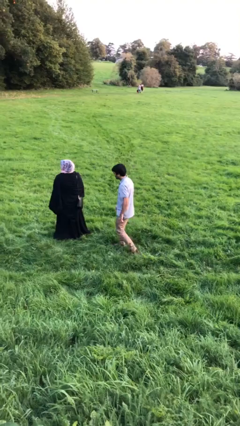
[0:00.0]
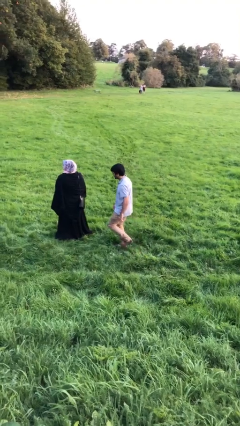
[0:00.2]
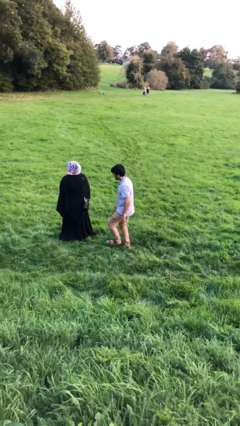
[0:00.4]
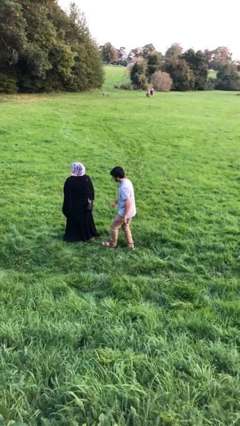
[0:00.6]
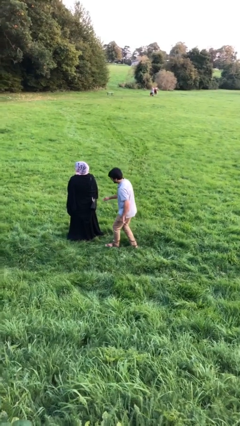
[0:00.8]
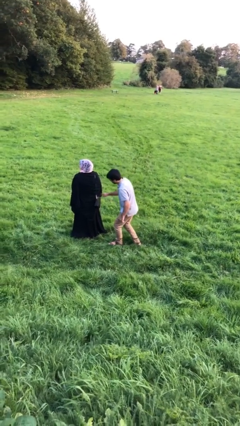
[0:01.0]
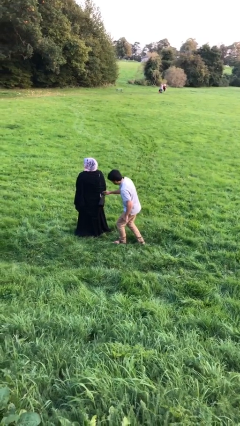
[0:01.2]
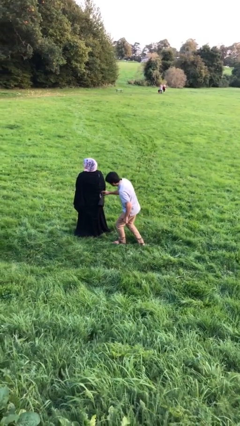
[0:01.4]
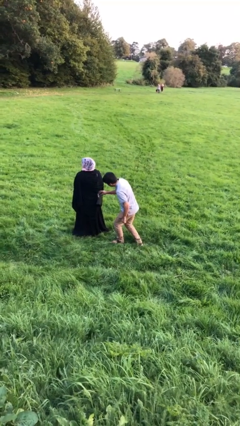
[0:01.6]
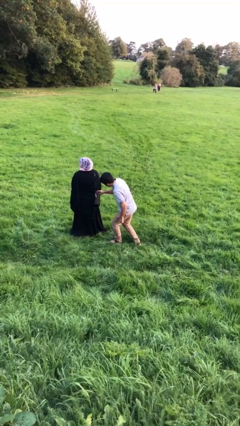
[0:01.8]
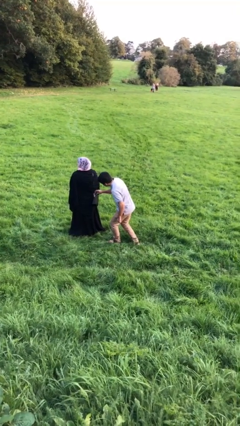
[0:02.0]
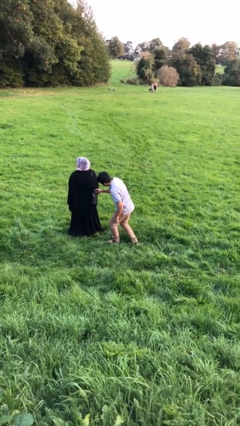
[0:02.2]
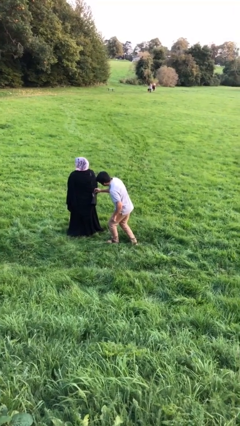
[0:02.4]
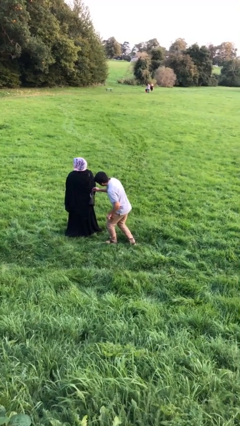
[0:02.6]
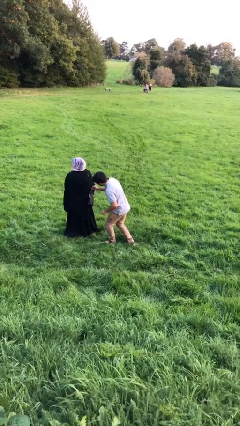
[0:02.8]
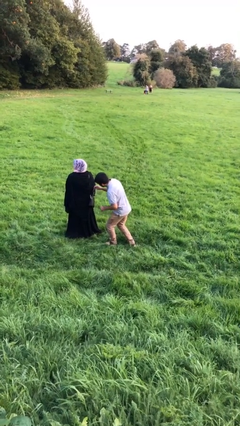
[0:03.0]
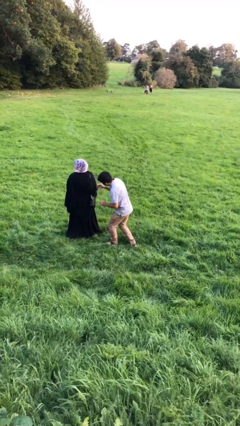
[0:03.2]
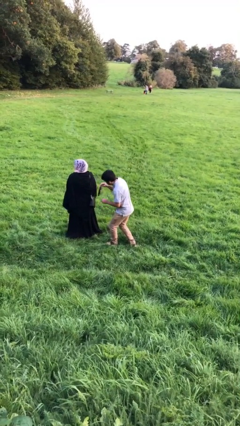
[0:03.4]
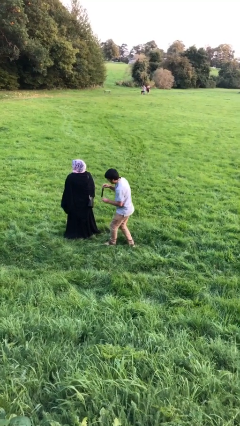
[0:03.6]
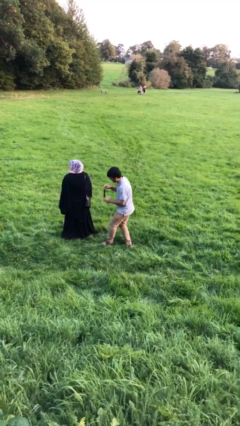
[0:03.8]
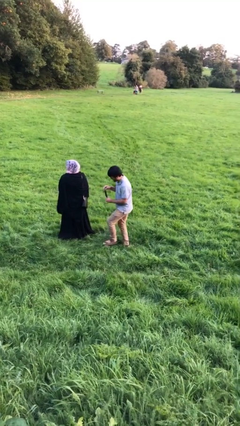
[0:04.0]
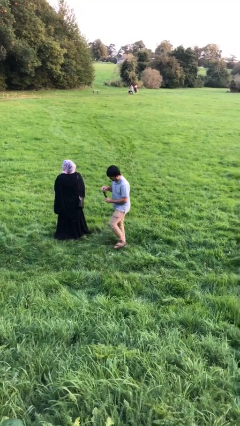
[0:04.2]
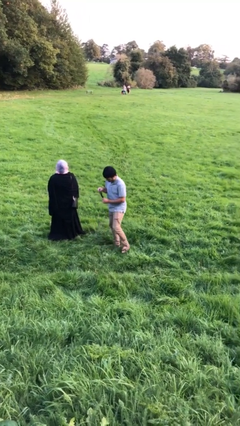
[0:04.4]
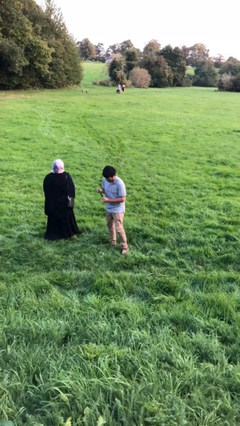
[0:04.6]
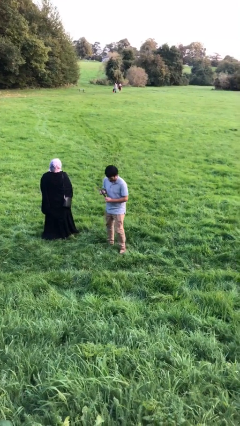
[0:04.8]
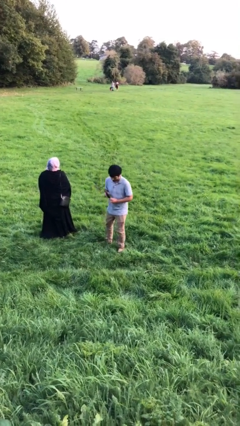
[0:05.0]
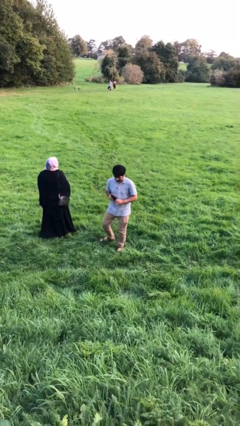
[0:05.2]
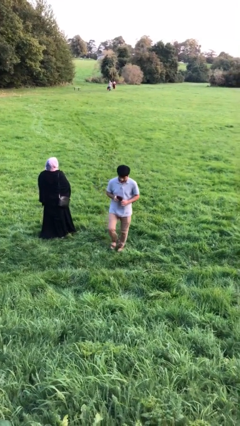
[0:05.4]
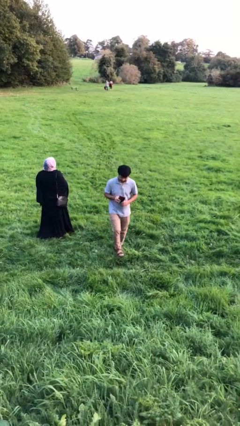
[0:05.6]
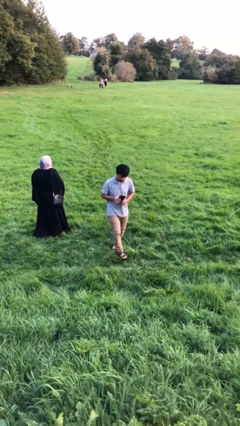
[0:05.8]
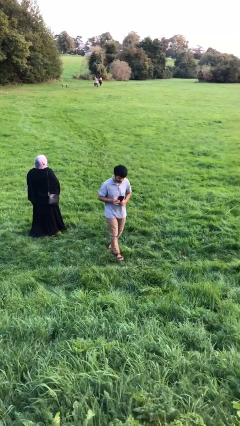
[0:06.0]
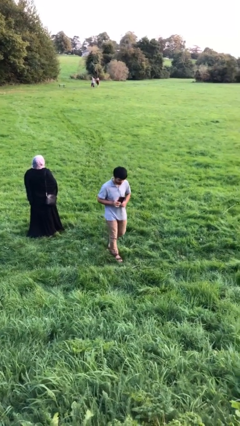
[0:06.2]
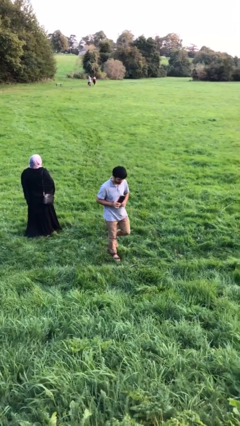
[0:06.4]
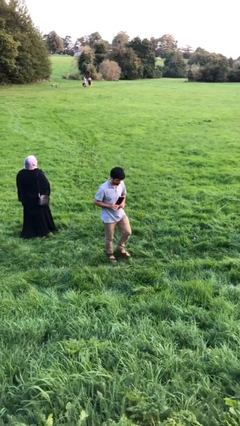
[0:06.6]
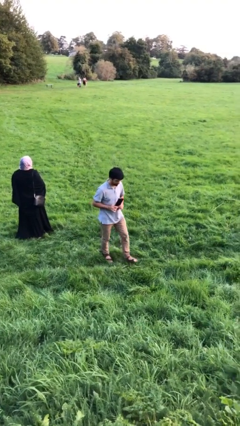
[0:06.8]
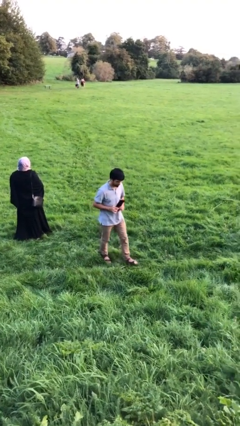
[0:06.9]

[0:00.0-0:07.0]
person steals object from person

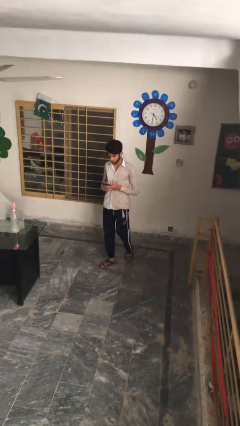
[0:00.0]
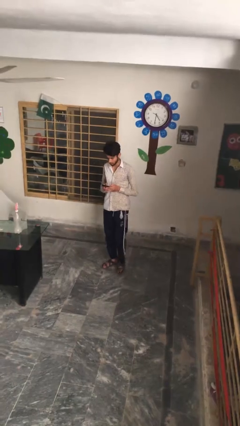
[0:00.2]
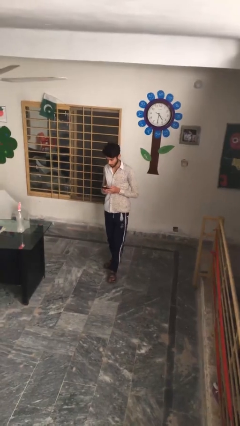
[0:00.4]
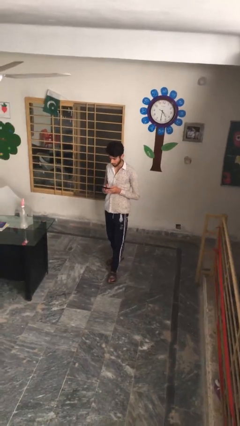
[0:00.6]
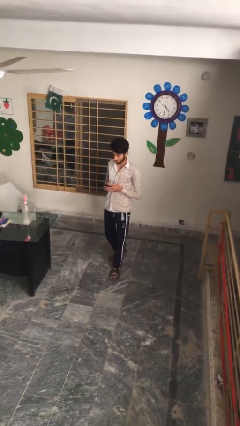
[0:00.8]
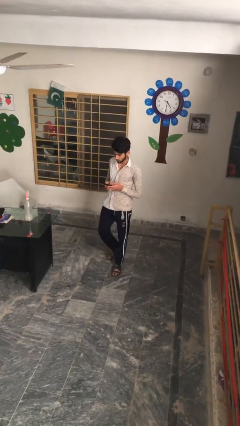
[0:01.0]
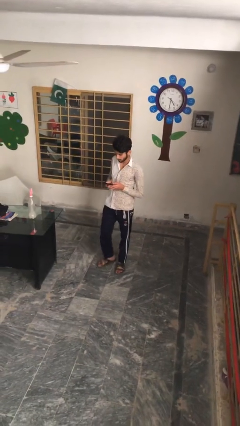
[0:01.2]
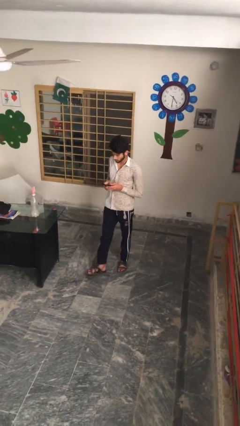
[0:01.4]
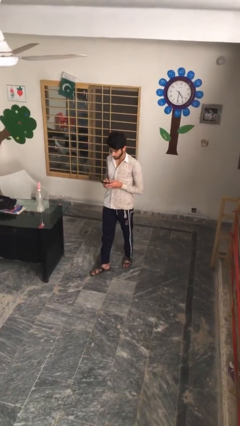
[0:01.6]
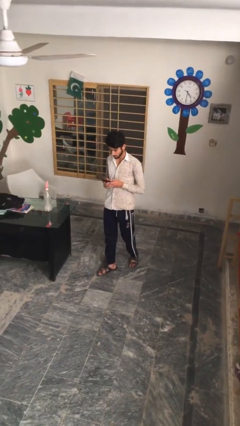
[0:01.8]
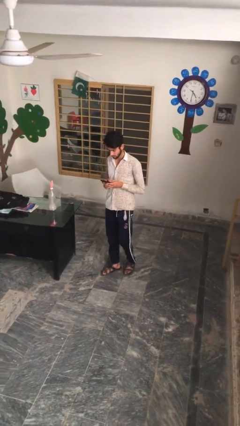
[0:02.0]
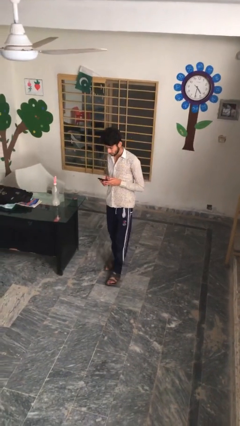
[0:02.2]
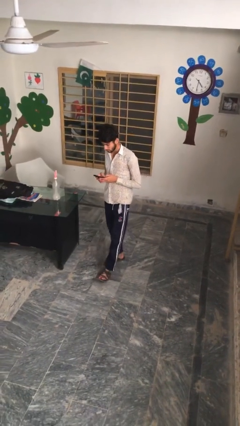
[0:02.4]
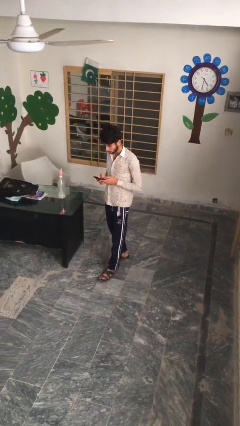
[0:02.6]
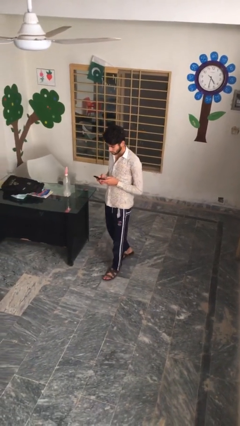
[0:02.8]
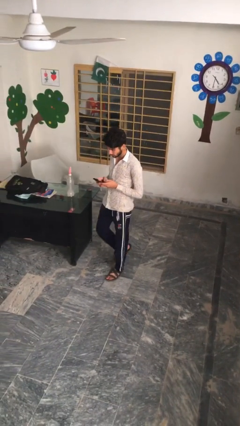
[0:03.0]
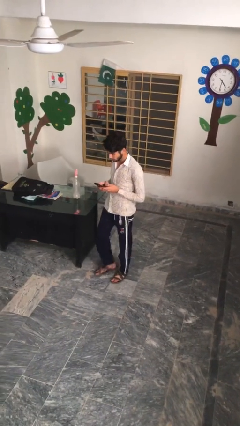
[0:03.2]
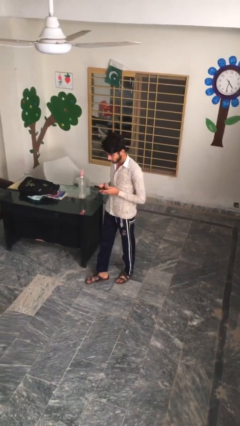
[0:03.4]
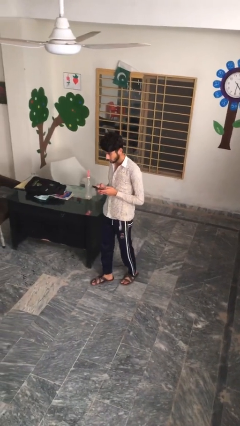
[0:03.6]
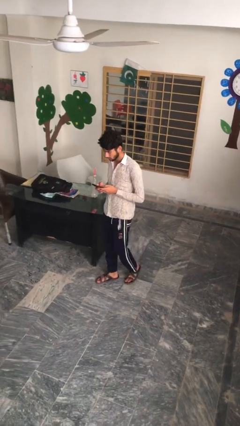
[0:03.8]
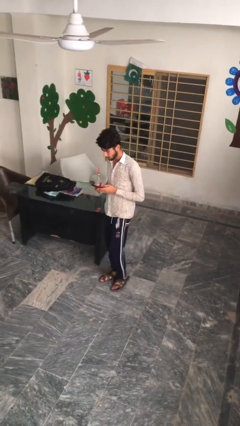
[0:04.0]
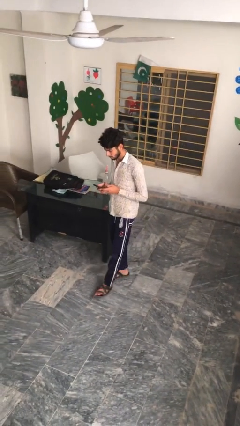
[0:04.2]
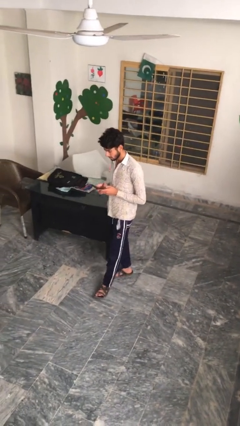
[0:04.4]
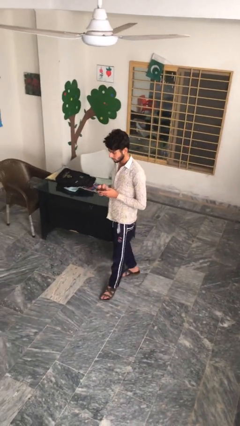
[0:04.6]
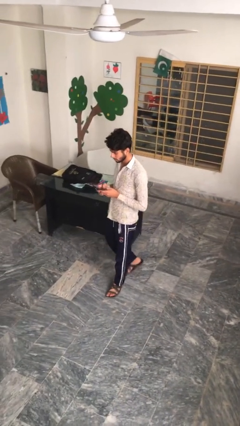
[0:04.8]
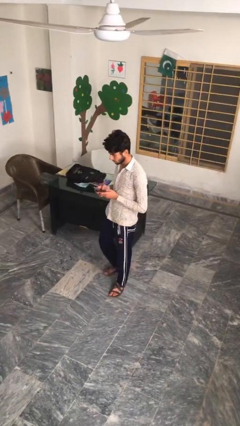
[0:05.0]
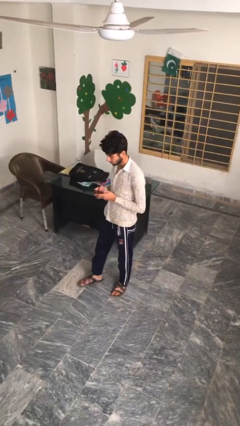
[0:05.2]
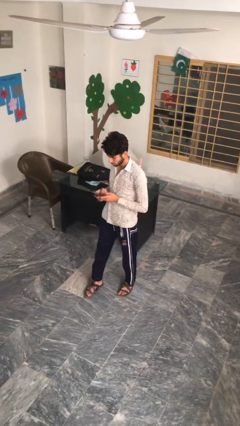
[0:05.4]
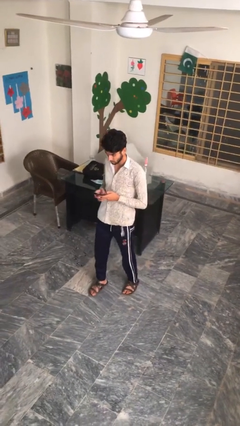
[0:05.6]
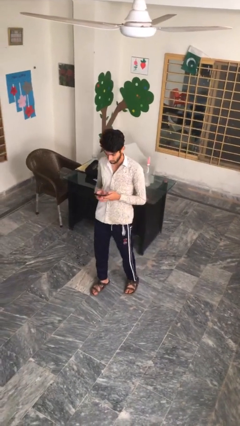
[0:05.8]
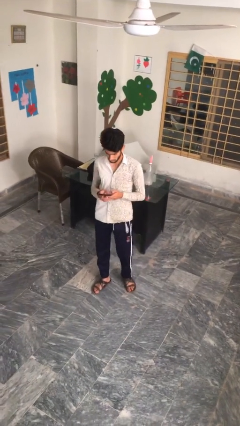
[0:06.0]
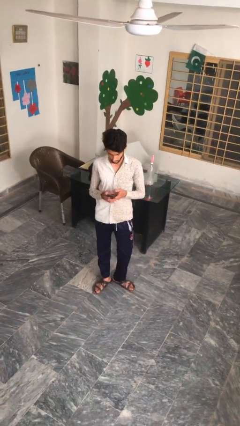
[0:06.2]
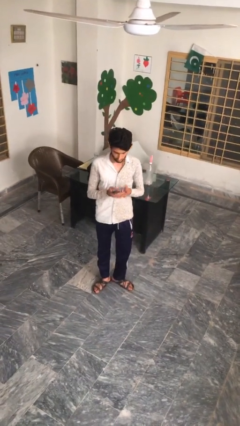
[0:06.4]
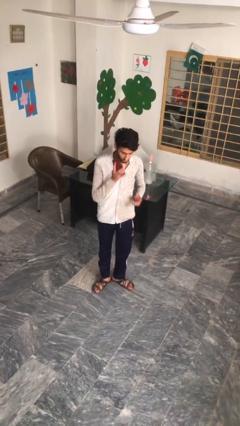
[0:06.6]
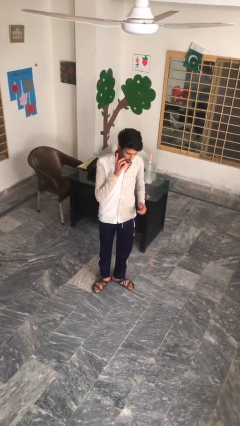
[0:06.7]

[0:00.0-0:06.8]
person texts on phone

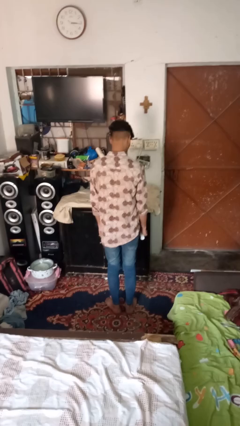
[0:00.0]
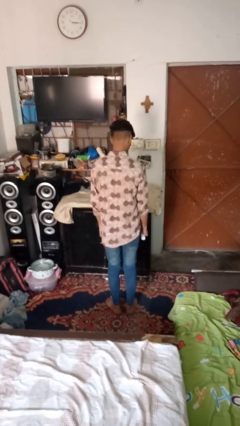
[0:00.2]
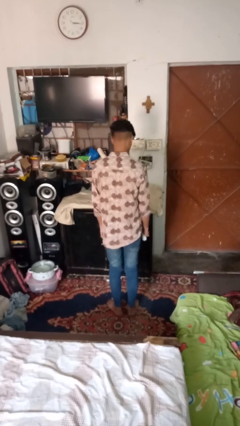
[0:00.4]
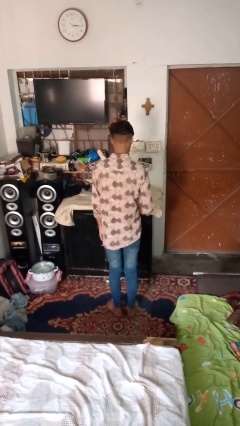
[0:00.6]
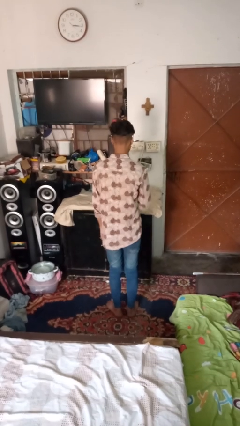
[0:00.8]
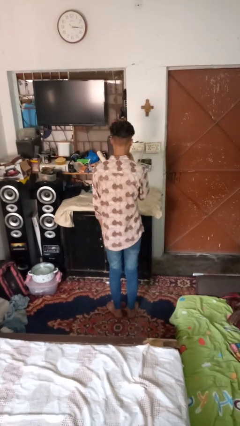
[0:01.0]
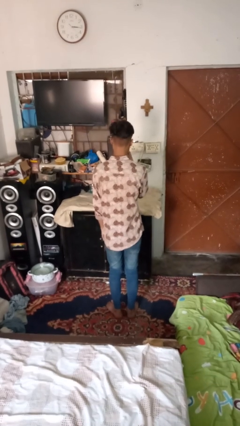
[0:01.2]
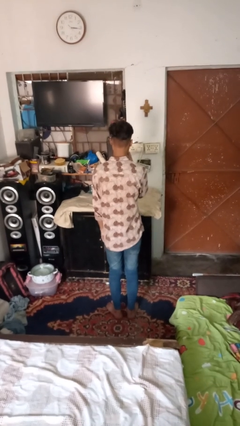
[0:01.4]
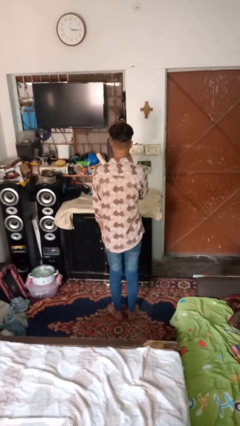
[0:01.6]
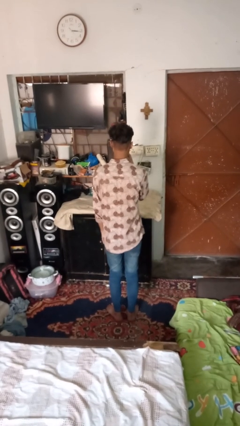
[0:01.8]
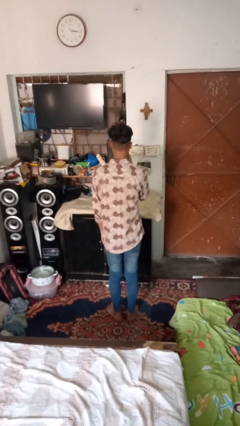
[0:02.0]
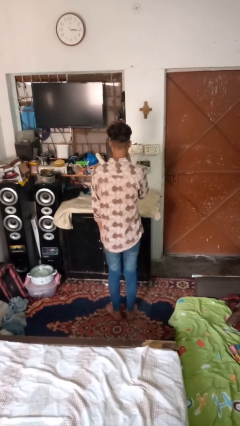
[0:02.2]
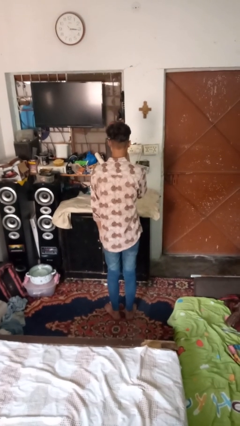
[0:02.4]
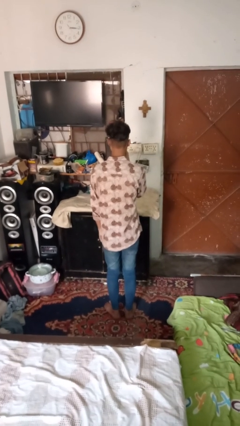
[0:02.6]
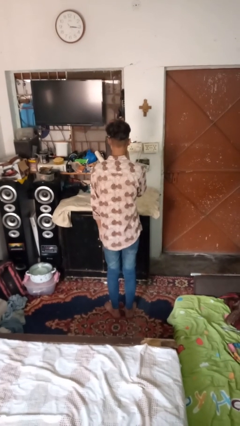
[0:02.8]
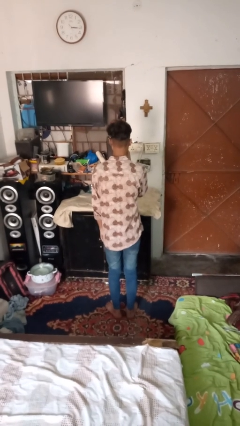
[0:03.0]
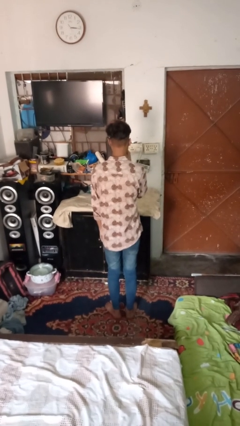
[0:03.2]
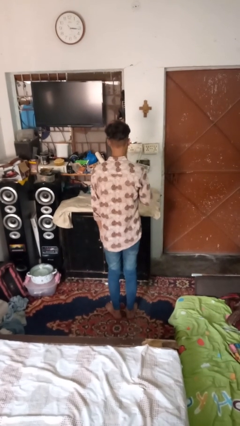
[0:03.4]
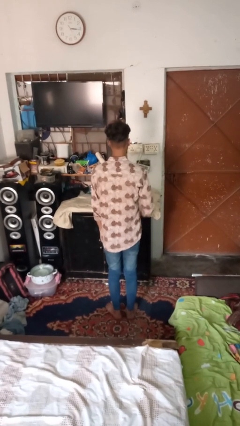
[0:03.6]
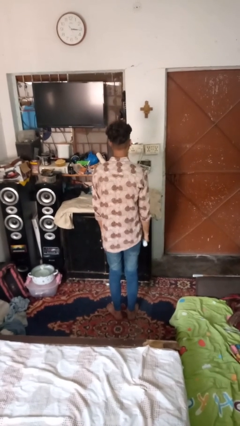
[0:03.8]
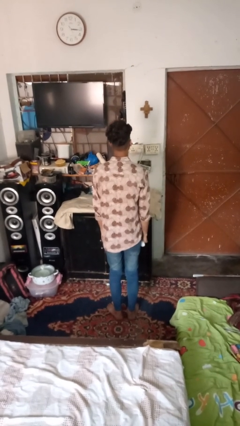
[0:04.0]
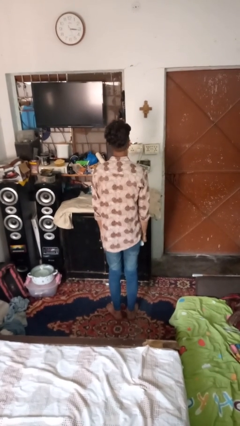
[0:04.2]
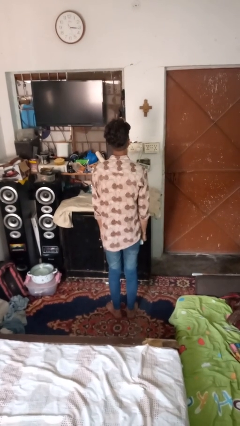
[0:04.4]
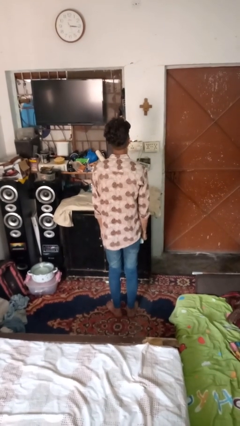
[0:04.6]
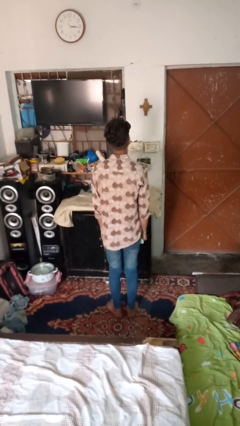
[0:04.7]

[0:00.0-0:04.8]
person vapes
